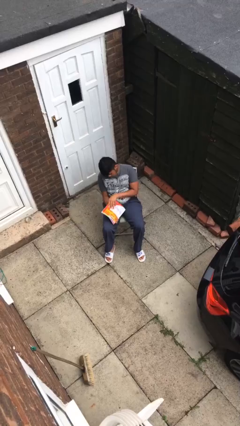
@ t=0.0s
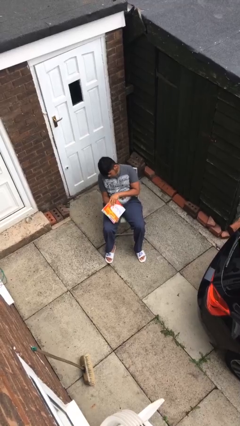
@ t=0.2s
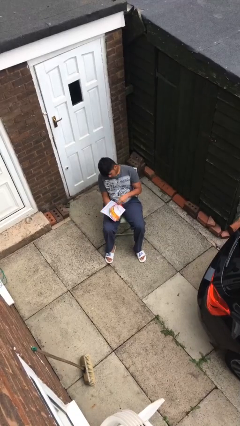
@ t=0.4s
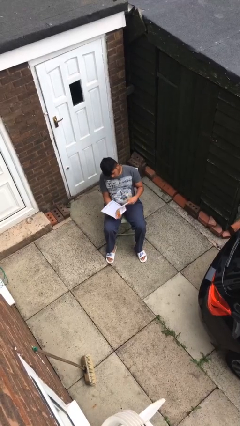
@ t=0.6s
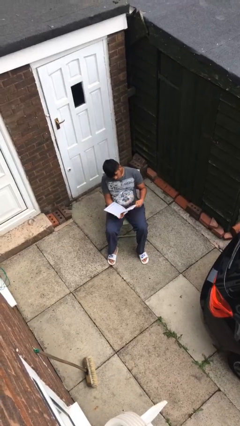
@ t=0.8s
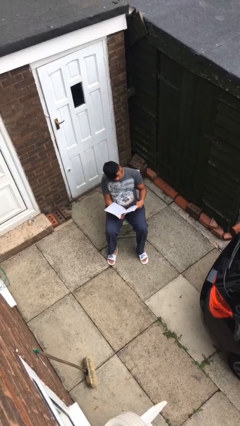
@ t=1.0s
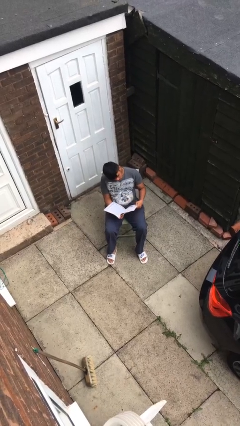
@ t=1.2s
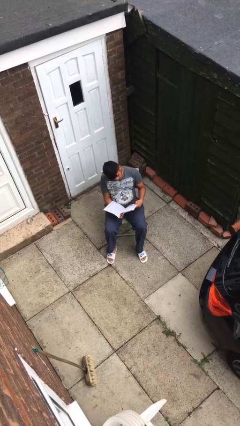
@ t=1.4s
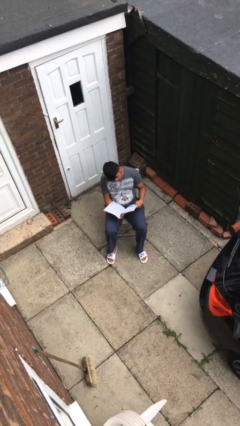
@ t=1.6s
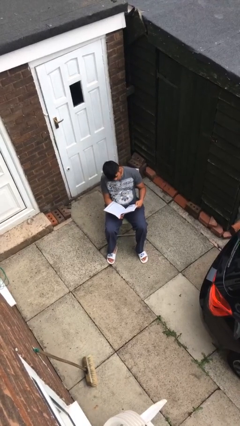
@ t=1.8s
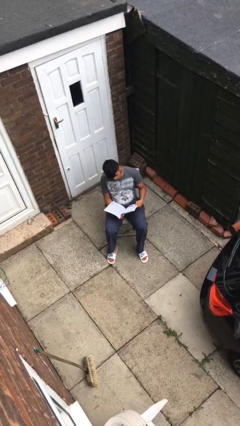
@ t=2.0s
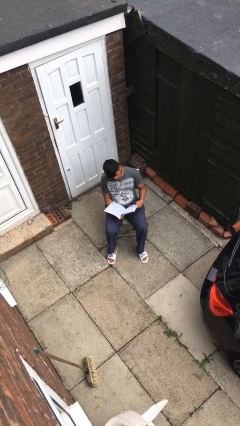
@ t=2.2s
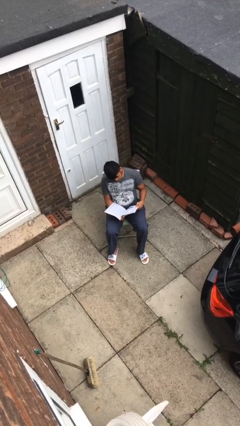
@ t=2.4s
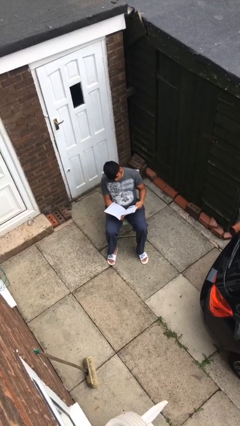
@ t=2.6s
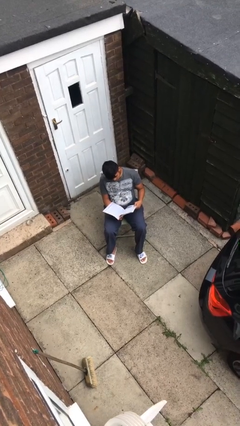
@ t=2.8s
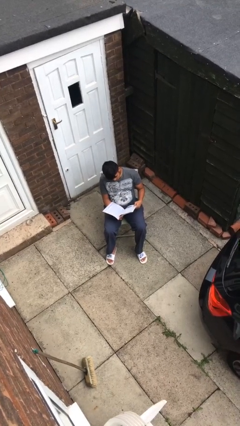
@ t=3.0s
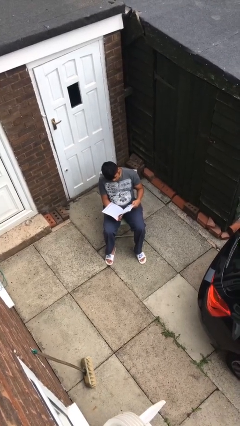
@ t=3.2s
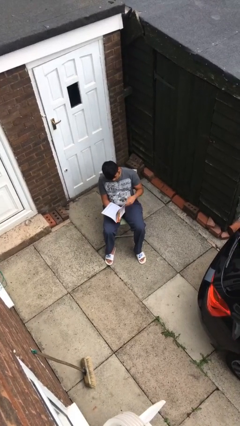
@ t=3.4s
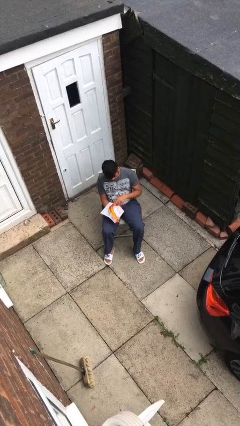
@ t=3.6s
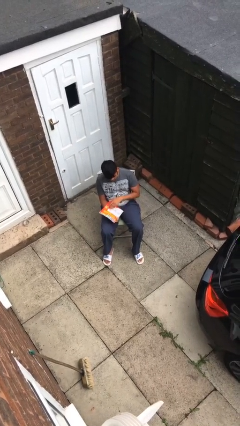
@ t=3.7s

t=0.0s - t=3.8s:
person reads magazine

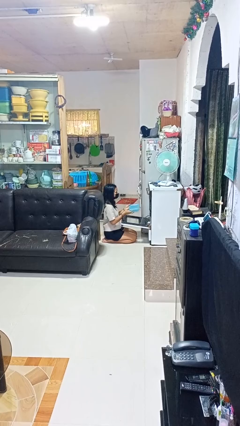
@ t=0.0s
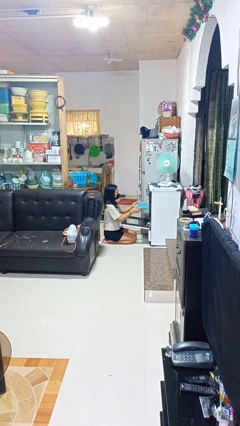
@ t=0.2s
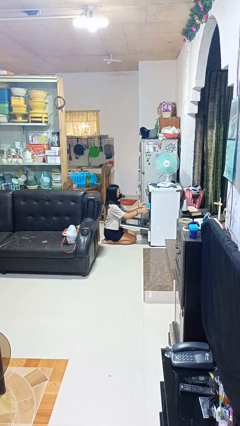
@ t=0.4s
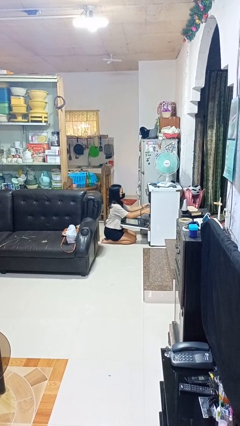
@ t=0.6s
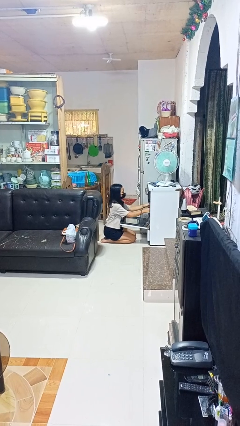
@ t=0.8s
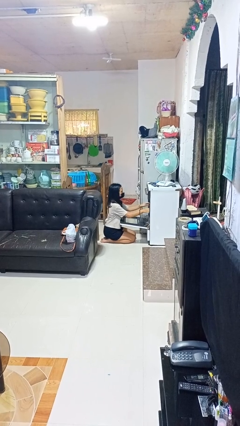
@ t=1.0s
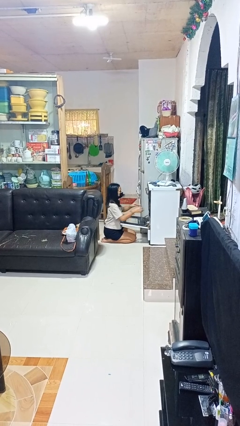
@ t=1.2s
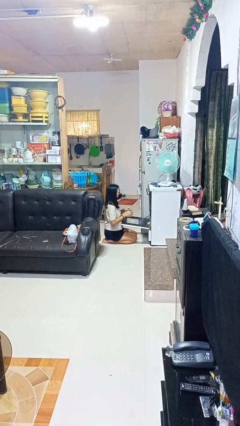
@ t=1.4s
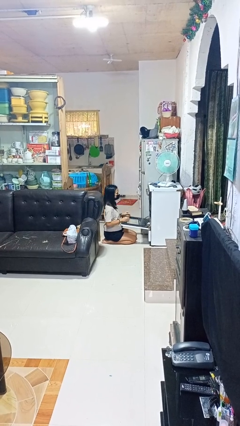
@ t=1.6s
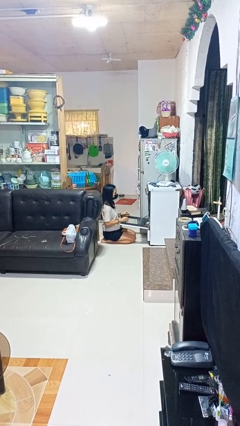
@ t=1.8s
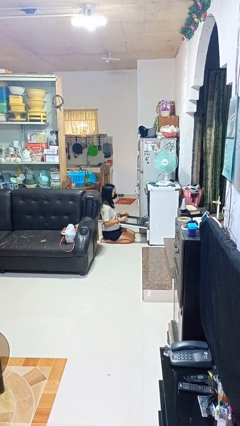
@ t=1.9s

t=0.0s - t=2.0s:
person puts object into oven

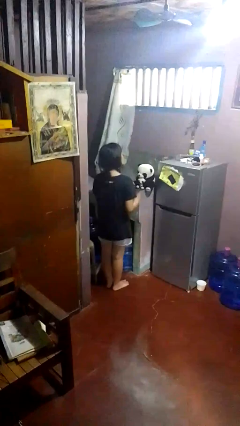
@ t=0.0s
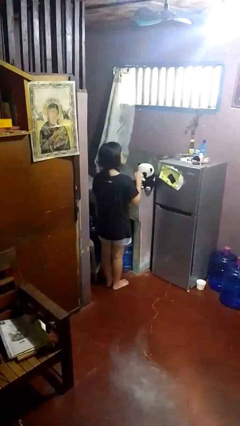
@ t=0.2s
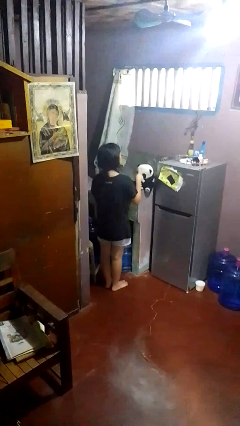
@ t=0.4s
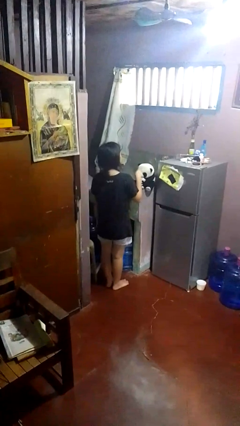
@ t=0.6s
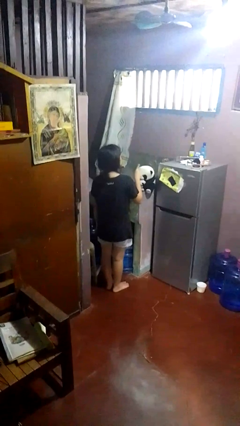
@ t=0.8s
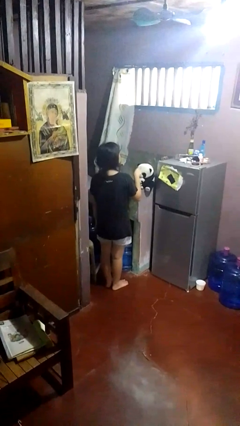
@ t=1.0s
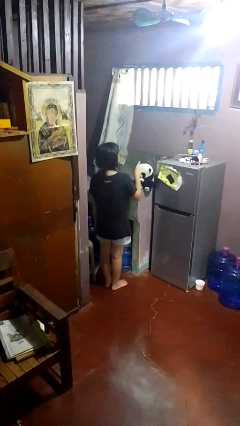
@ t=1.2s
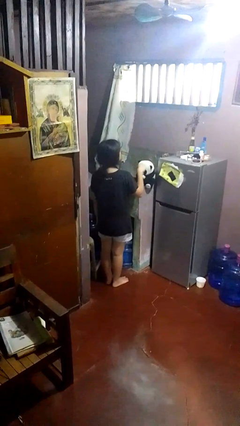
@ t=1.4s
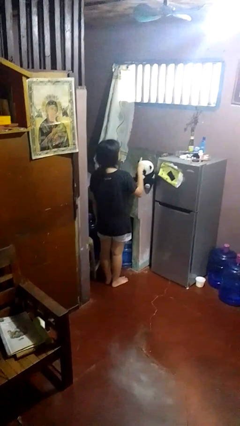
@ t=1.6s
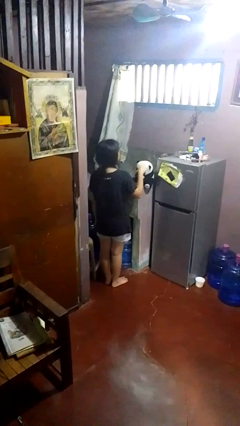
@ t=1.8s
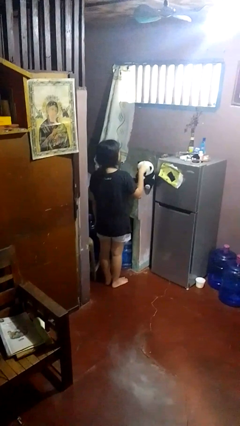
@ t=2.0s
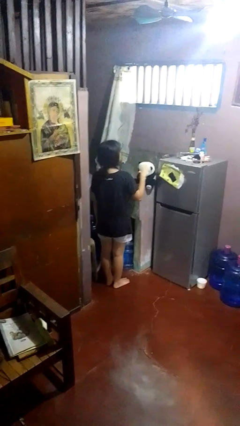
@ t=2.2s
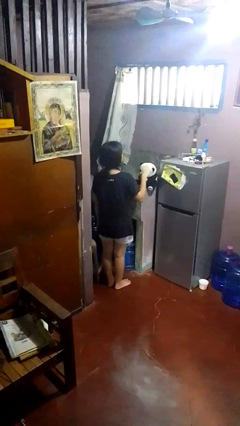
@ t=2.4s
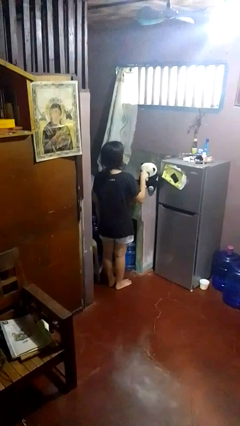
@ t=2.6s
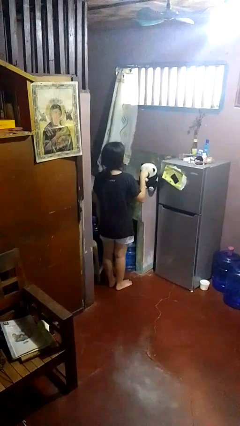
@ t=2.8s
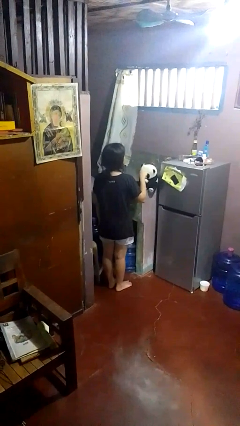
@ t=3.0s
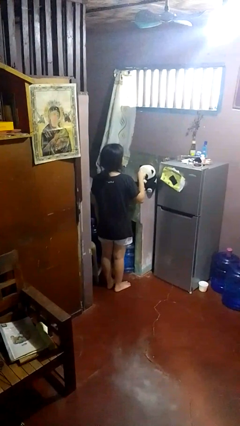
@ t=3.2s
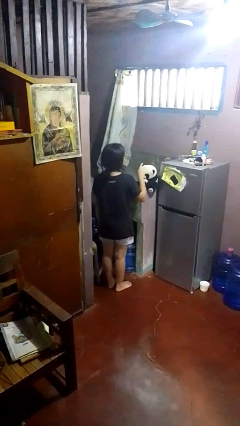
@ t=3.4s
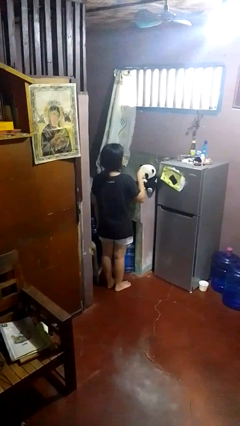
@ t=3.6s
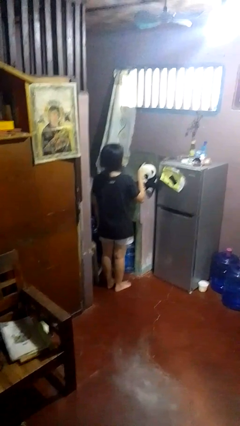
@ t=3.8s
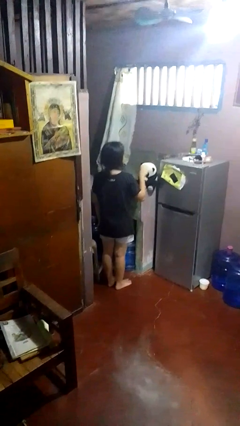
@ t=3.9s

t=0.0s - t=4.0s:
person taps object with finger

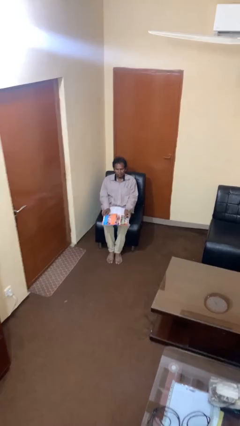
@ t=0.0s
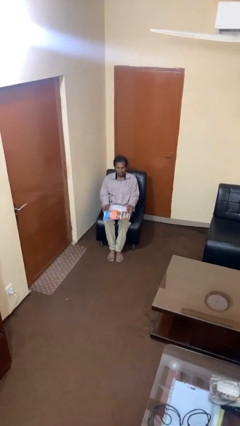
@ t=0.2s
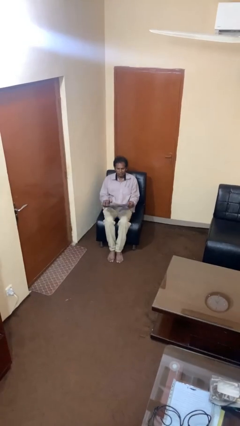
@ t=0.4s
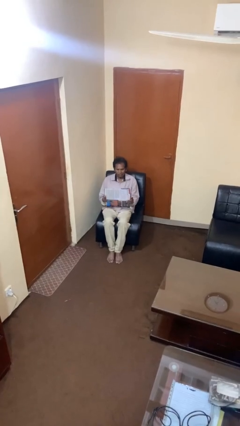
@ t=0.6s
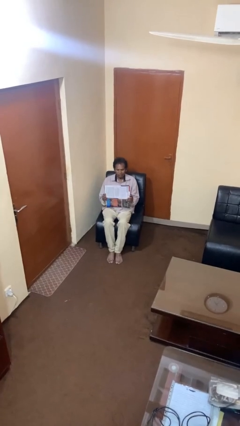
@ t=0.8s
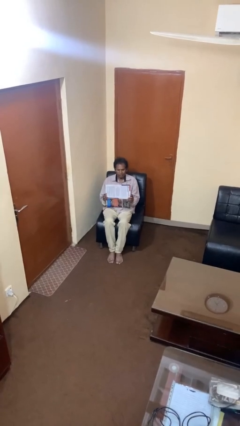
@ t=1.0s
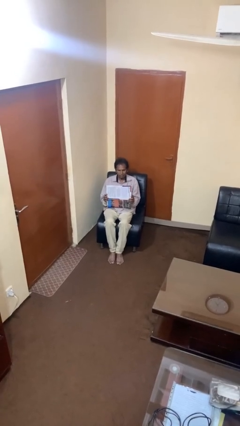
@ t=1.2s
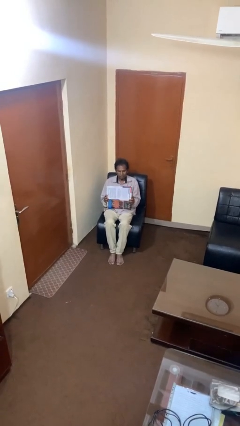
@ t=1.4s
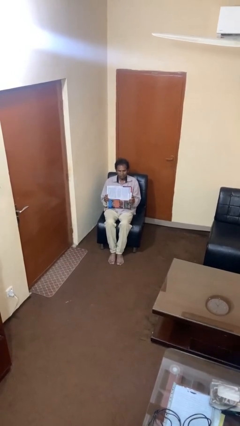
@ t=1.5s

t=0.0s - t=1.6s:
person reads newspaper

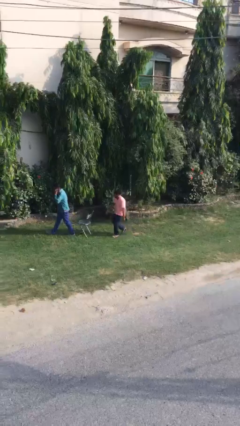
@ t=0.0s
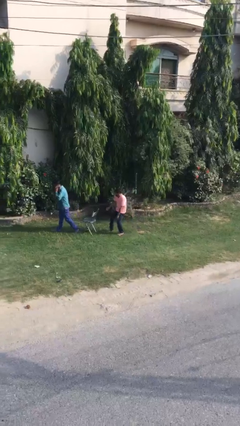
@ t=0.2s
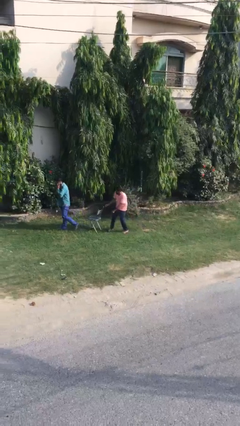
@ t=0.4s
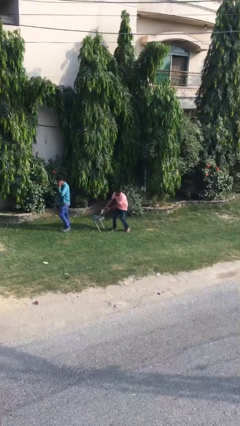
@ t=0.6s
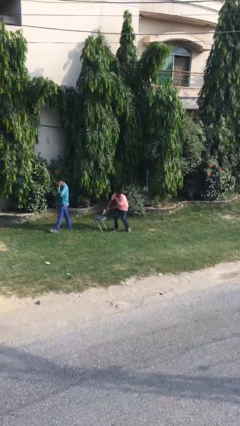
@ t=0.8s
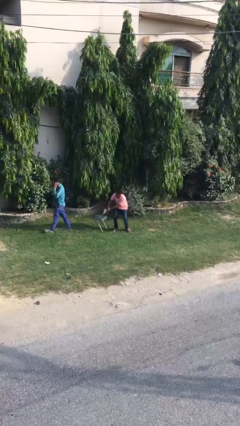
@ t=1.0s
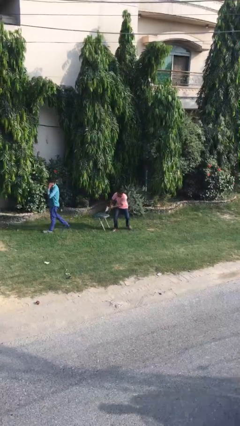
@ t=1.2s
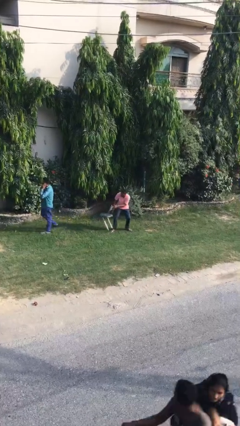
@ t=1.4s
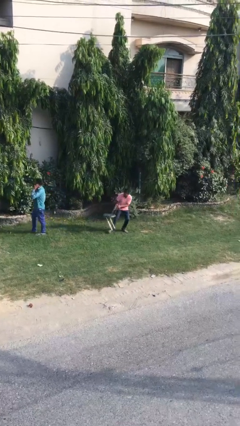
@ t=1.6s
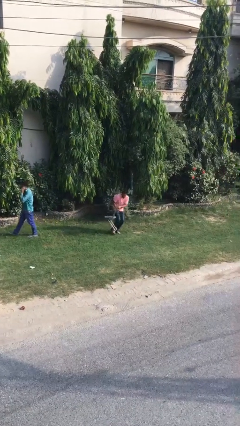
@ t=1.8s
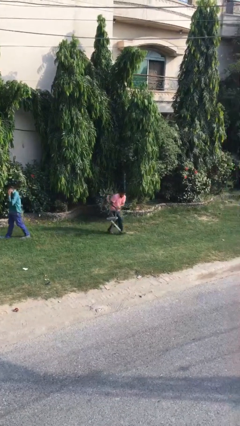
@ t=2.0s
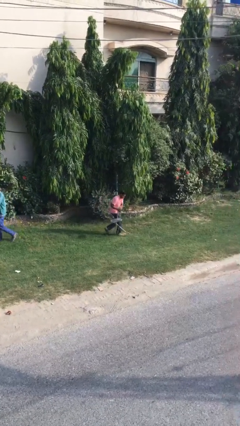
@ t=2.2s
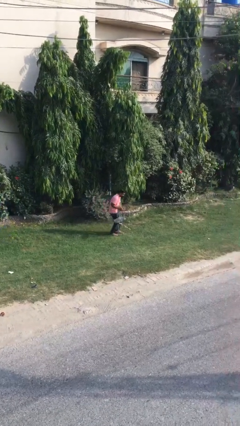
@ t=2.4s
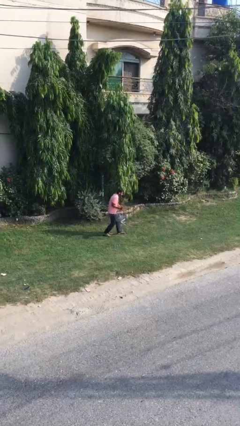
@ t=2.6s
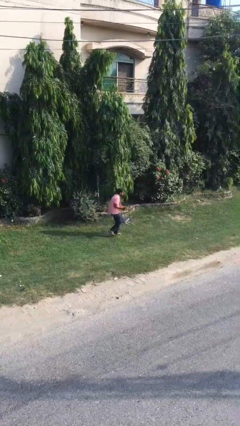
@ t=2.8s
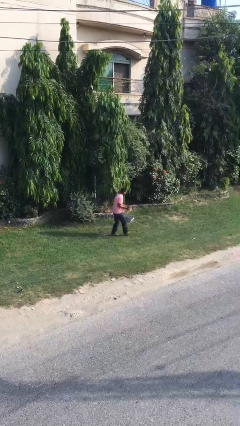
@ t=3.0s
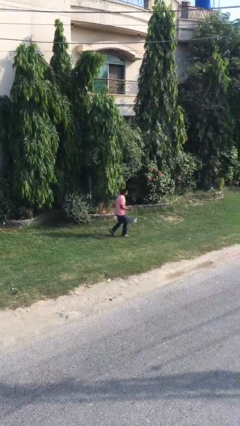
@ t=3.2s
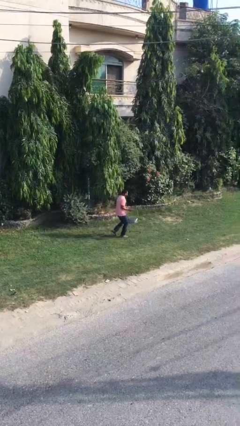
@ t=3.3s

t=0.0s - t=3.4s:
person steals object from person

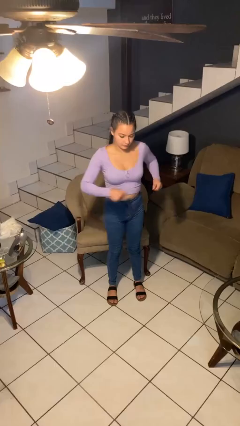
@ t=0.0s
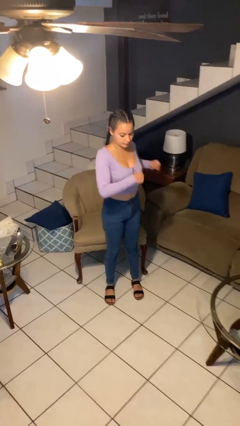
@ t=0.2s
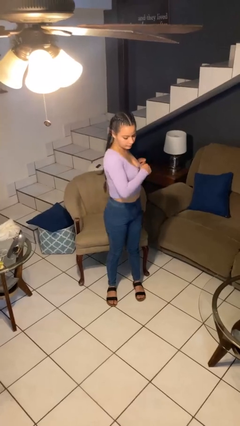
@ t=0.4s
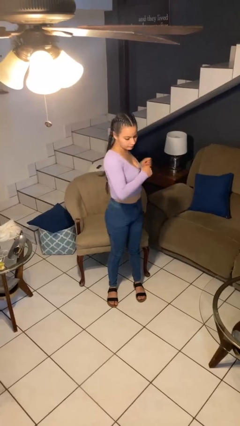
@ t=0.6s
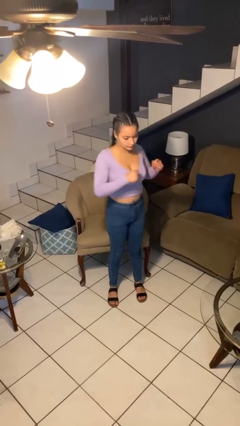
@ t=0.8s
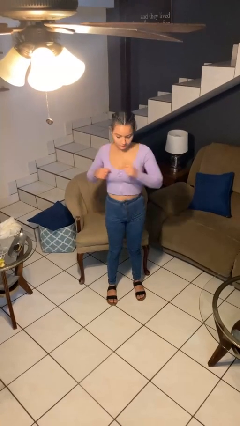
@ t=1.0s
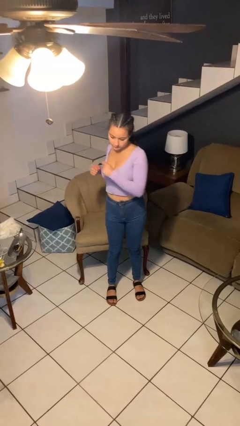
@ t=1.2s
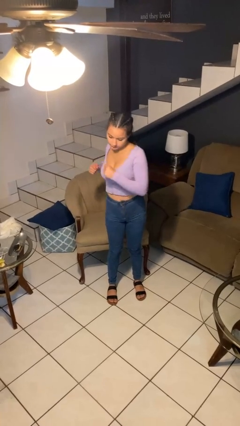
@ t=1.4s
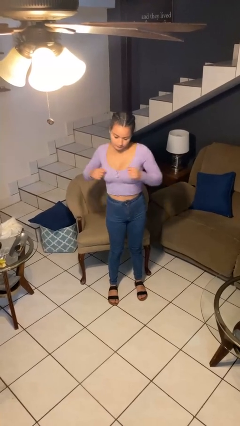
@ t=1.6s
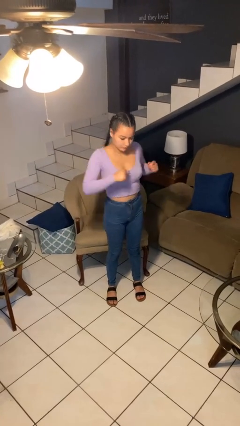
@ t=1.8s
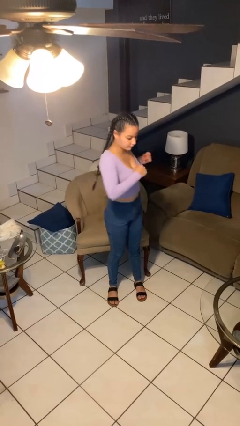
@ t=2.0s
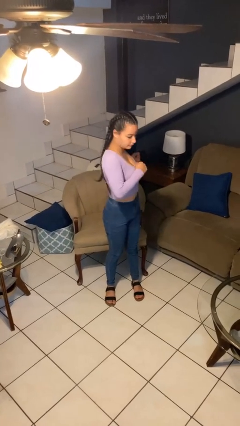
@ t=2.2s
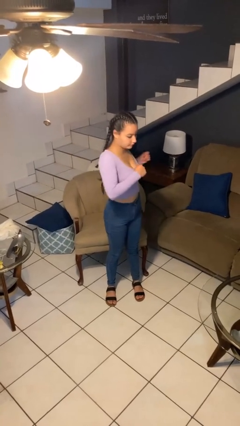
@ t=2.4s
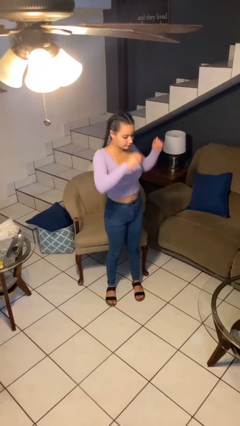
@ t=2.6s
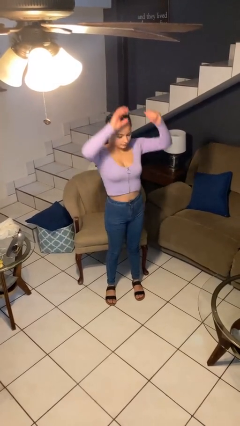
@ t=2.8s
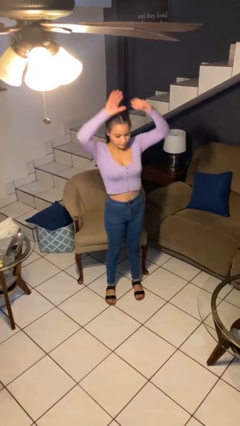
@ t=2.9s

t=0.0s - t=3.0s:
person stretches arms to side
